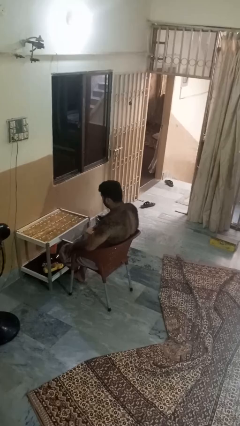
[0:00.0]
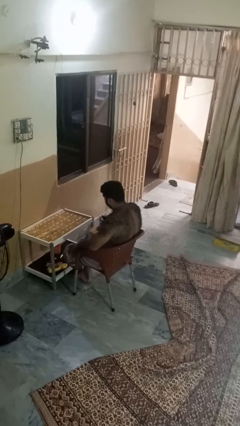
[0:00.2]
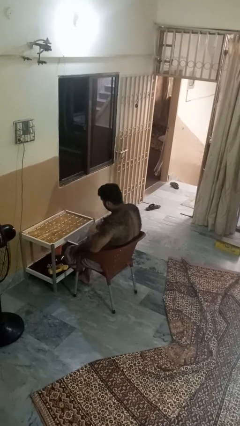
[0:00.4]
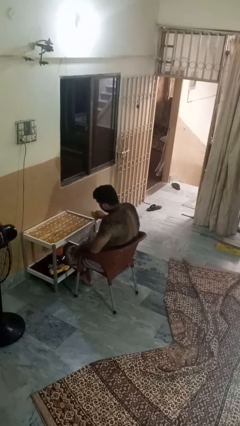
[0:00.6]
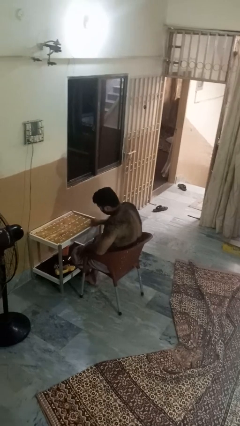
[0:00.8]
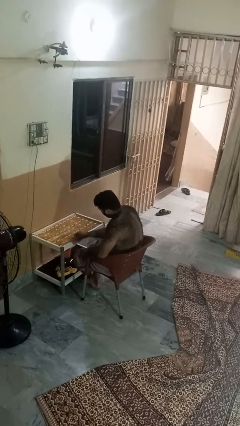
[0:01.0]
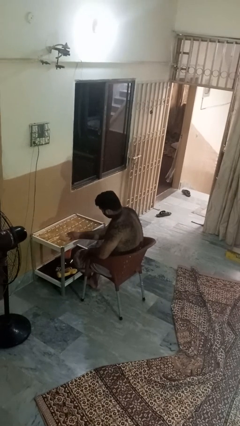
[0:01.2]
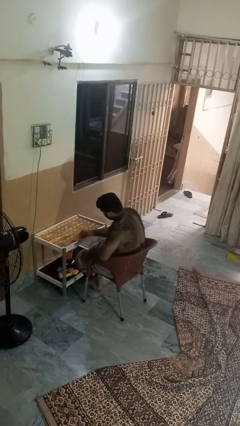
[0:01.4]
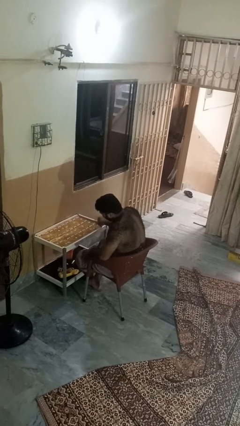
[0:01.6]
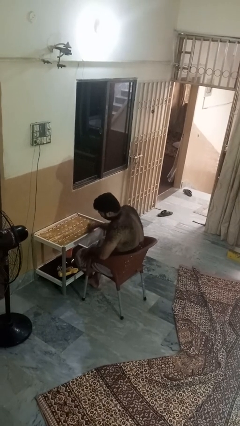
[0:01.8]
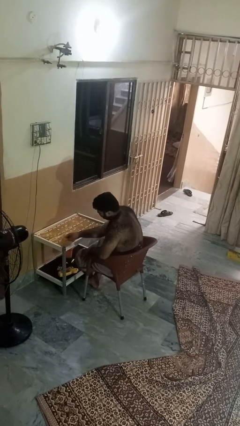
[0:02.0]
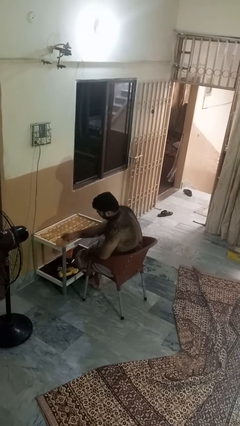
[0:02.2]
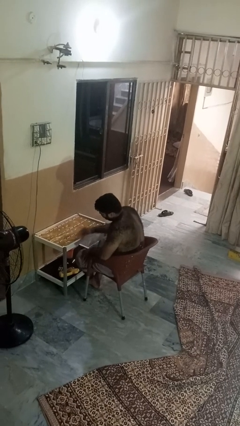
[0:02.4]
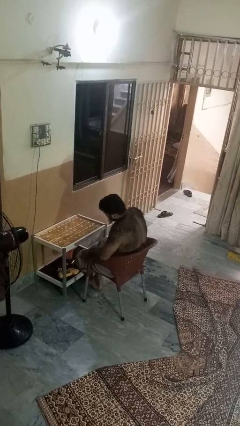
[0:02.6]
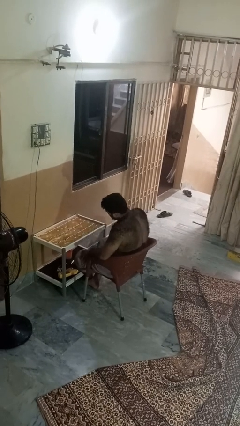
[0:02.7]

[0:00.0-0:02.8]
person cleans table with rag

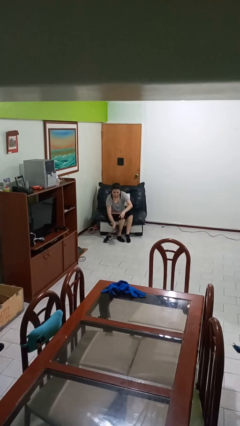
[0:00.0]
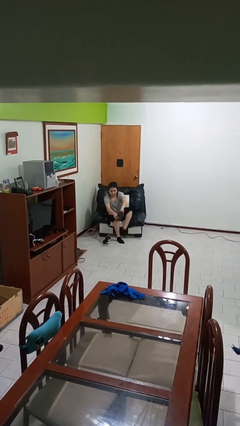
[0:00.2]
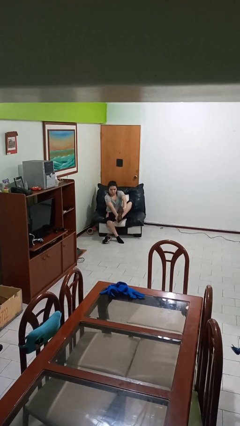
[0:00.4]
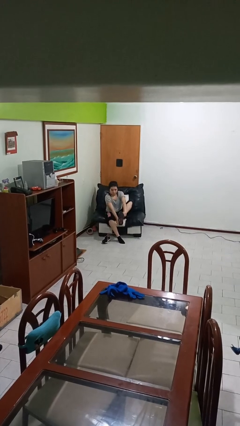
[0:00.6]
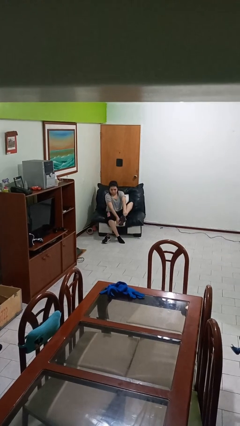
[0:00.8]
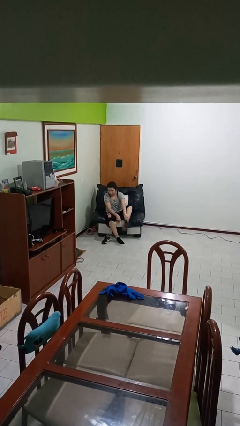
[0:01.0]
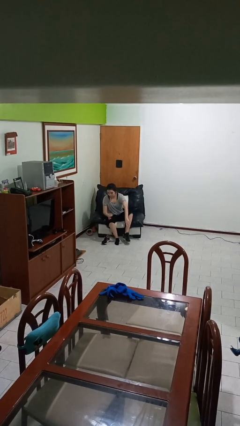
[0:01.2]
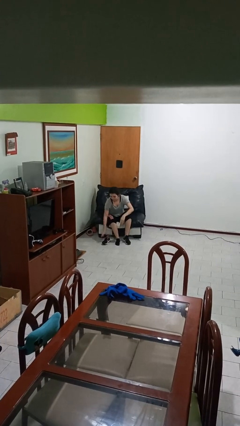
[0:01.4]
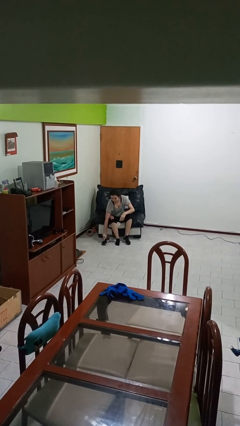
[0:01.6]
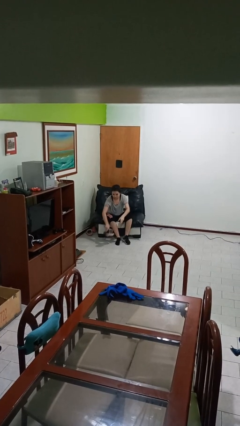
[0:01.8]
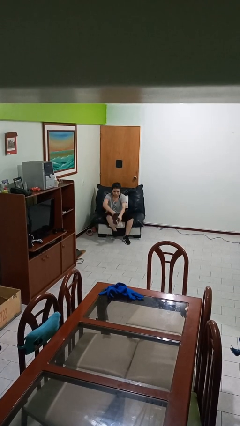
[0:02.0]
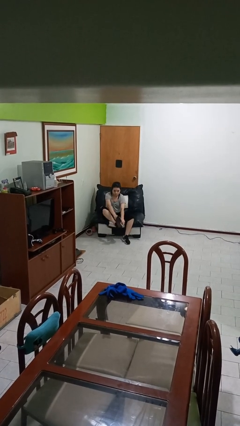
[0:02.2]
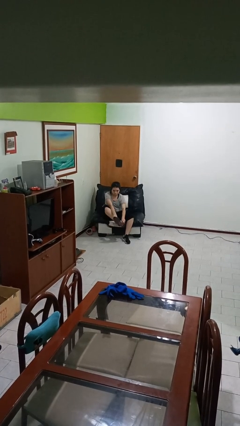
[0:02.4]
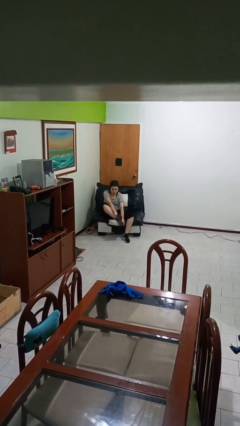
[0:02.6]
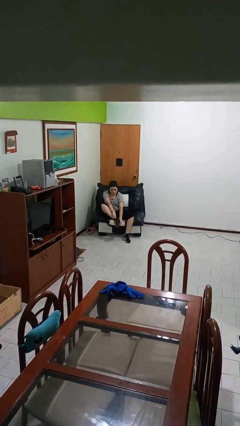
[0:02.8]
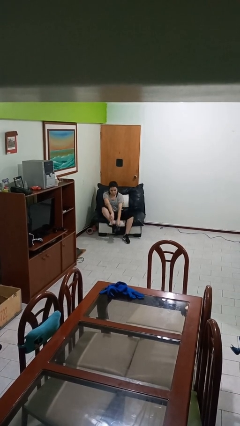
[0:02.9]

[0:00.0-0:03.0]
person puts on shoes

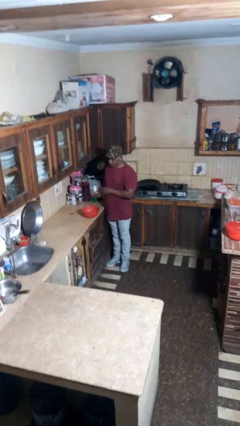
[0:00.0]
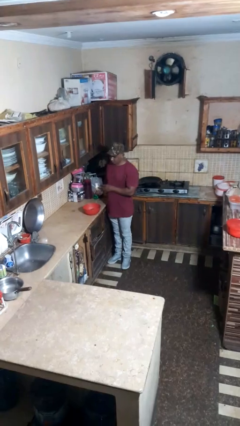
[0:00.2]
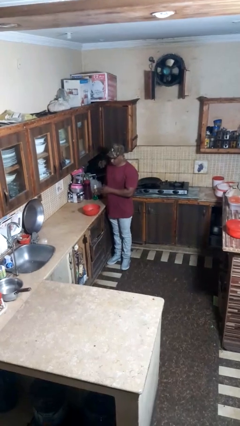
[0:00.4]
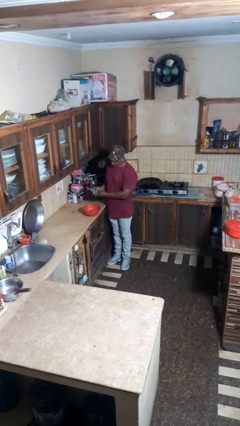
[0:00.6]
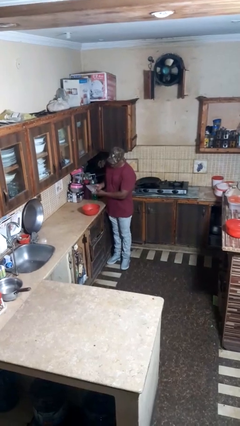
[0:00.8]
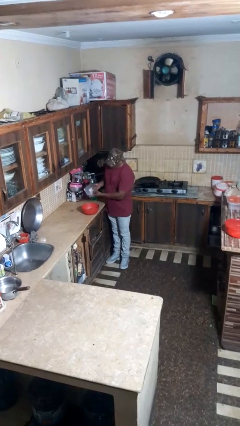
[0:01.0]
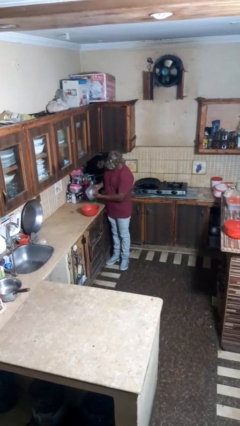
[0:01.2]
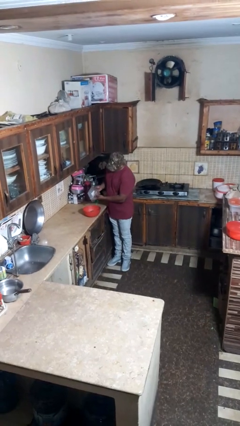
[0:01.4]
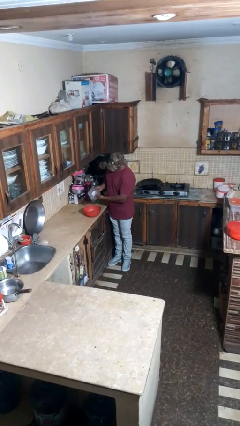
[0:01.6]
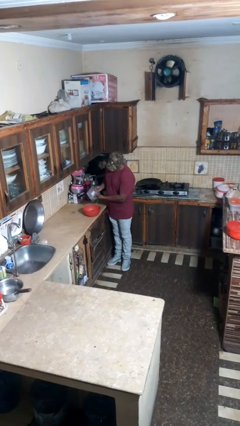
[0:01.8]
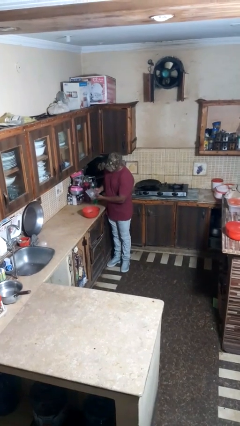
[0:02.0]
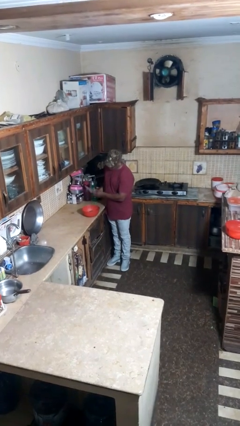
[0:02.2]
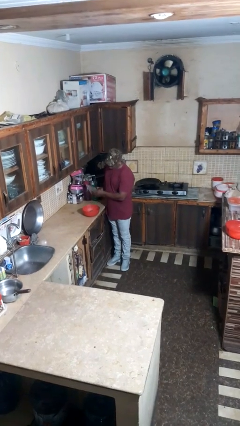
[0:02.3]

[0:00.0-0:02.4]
person pours into bowl

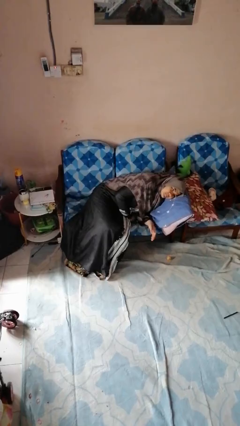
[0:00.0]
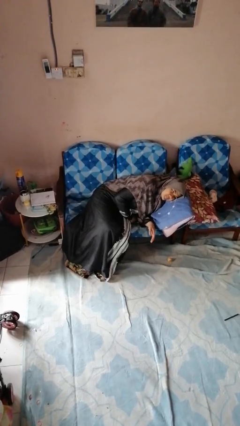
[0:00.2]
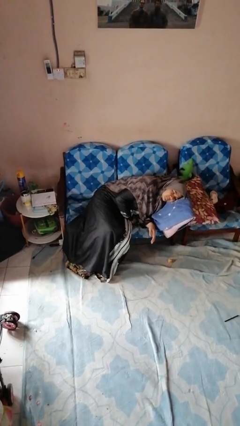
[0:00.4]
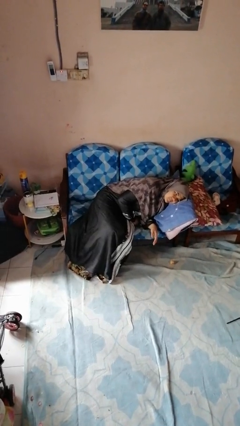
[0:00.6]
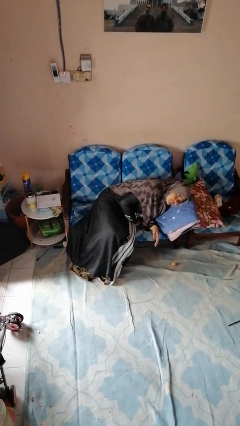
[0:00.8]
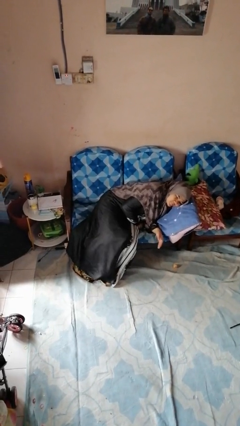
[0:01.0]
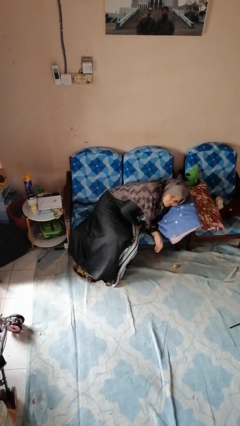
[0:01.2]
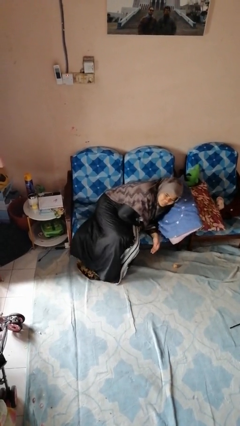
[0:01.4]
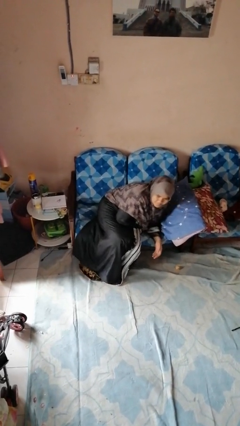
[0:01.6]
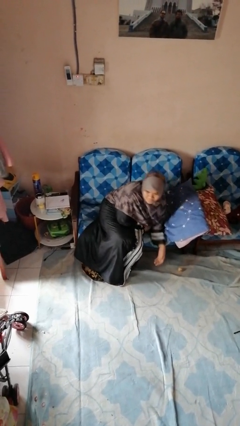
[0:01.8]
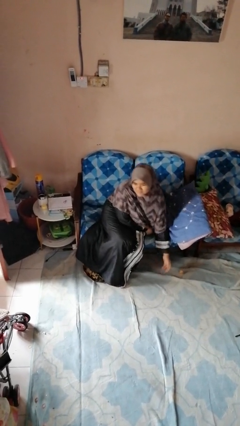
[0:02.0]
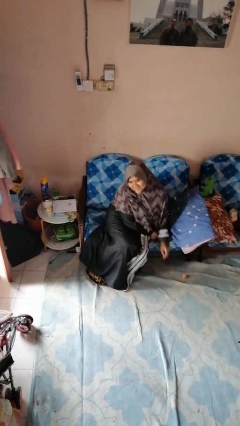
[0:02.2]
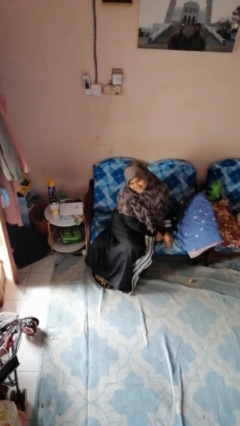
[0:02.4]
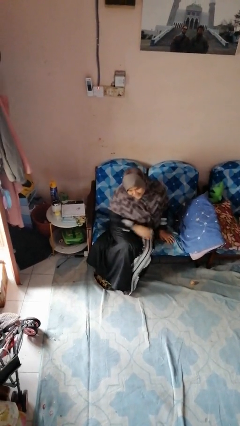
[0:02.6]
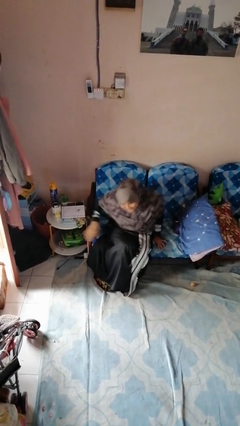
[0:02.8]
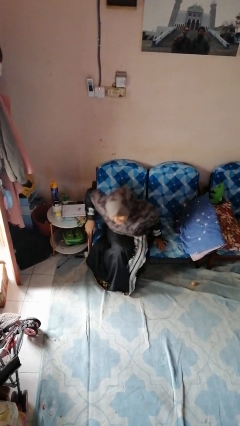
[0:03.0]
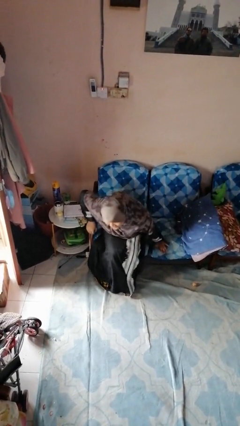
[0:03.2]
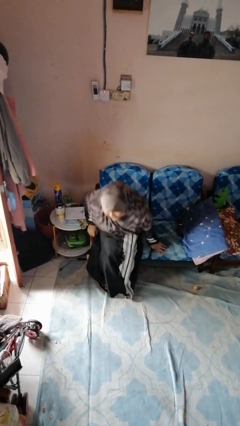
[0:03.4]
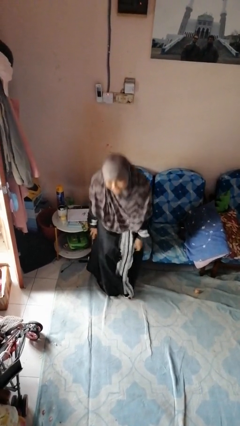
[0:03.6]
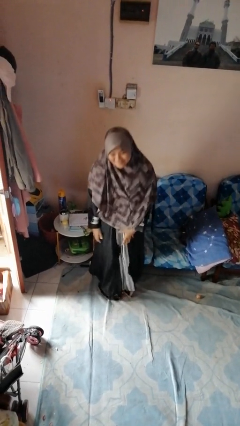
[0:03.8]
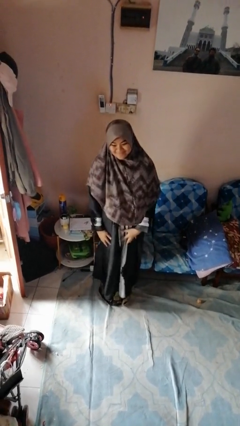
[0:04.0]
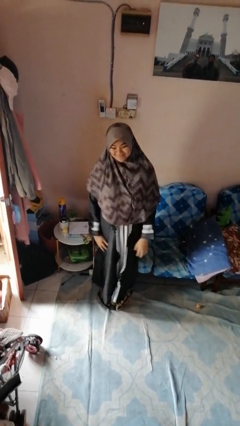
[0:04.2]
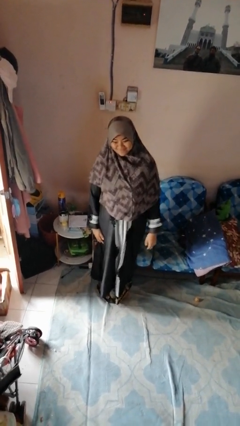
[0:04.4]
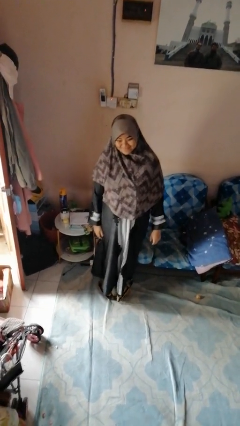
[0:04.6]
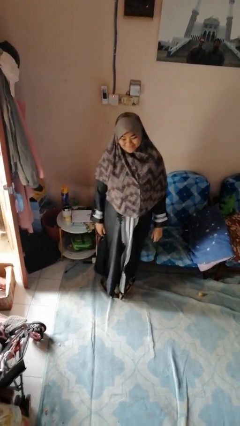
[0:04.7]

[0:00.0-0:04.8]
person stands up

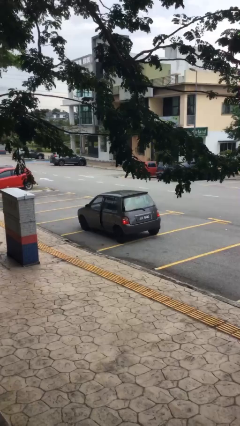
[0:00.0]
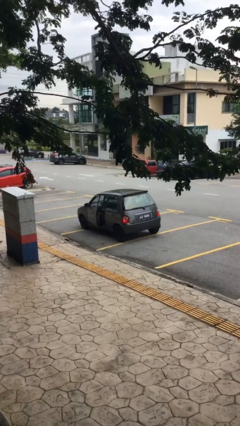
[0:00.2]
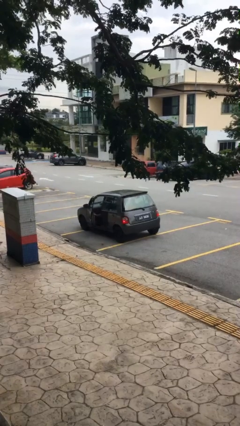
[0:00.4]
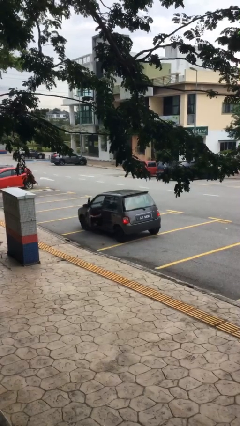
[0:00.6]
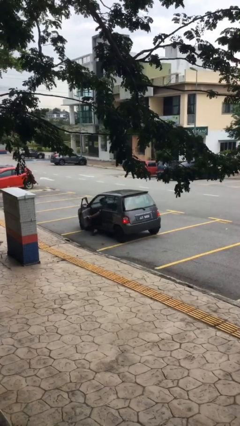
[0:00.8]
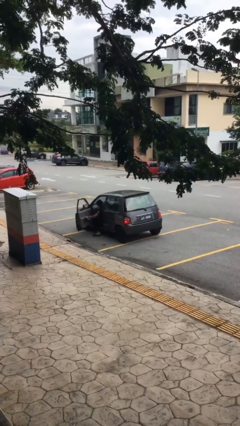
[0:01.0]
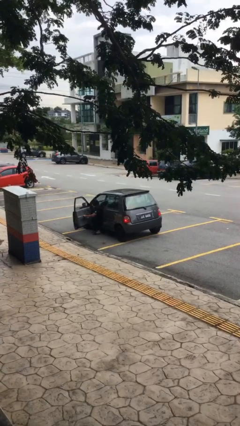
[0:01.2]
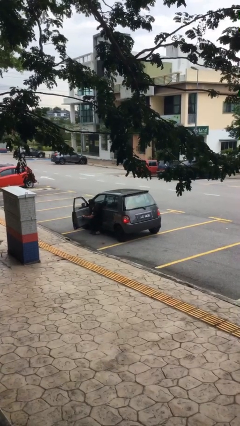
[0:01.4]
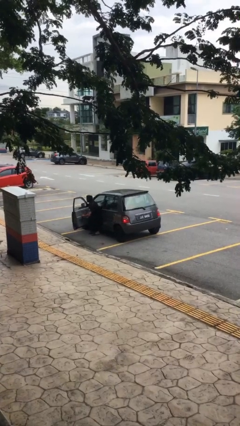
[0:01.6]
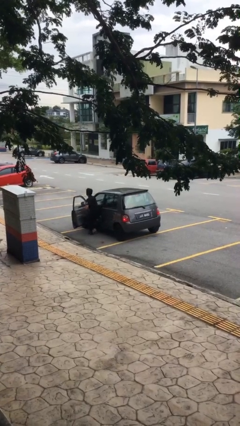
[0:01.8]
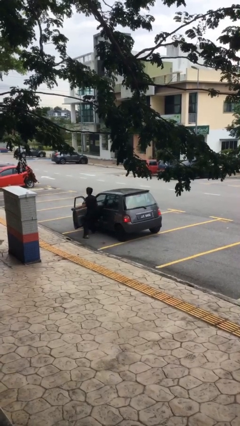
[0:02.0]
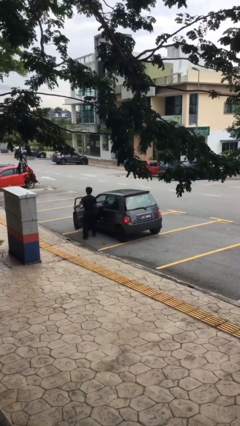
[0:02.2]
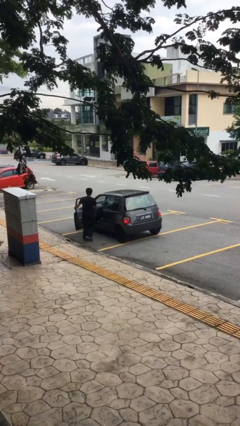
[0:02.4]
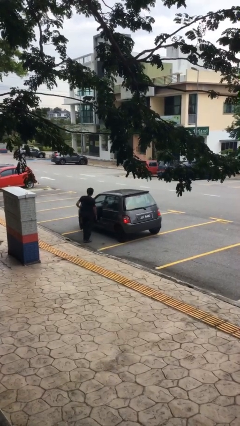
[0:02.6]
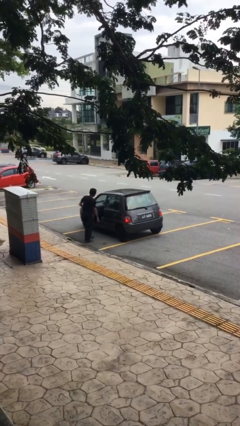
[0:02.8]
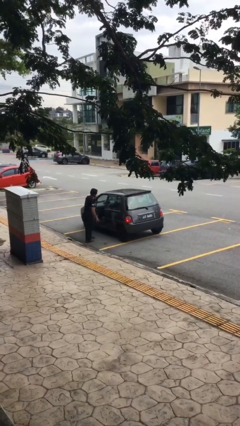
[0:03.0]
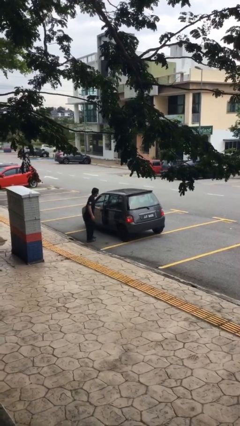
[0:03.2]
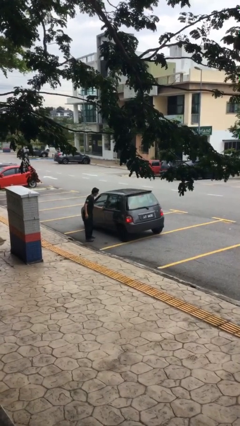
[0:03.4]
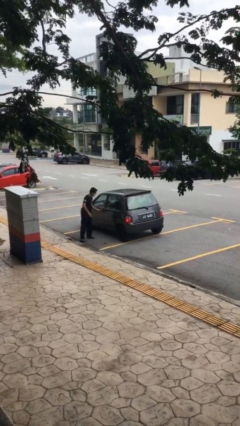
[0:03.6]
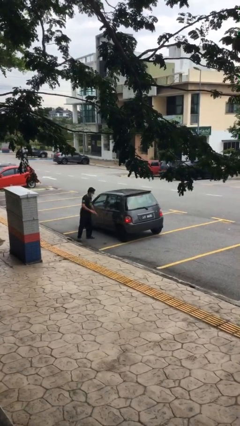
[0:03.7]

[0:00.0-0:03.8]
car drops off person

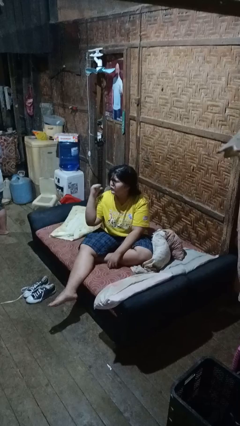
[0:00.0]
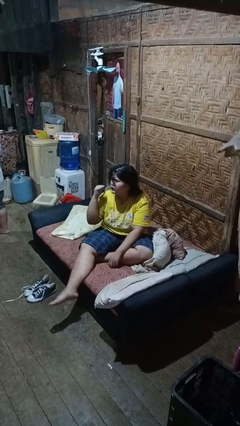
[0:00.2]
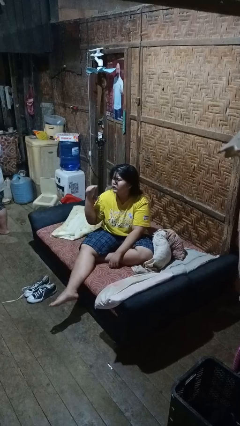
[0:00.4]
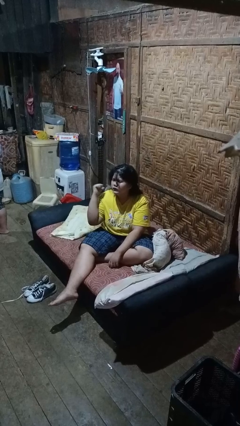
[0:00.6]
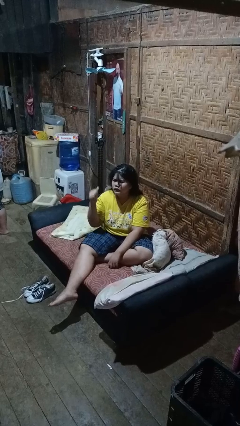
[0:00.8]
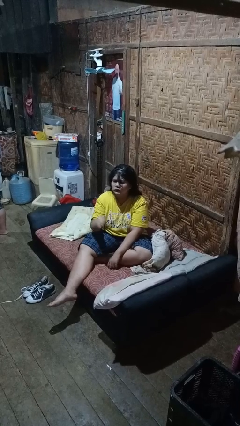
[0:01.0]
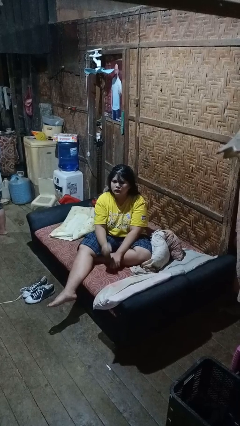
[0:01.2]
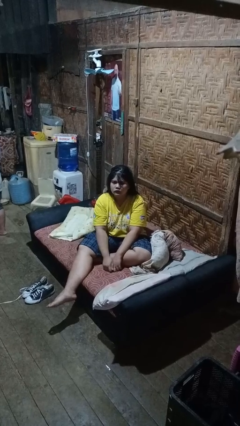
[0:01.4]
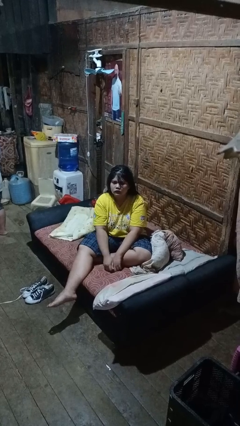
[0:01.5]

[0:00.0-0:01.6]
person gestures behind me
